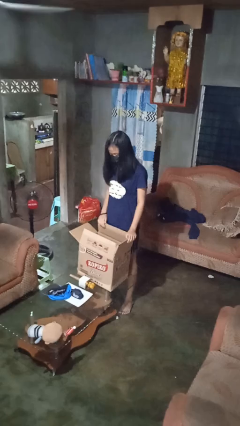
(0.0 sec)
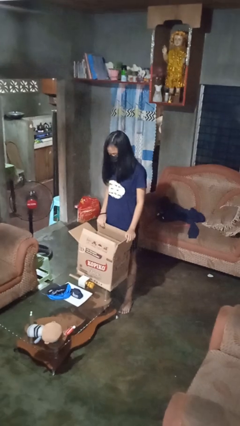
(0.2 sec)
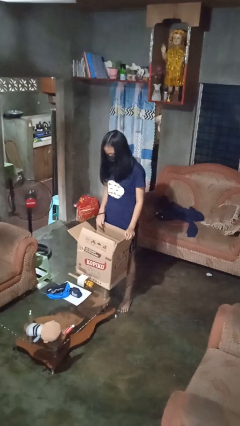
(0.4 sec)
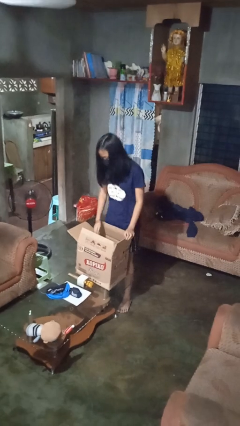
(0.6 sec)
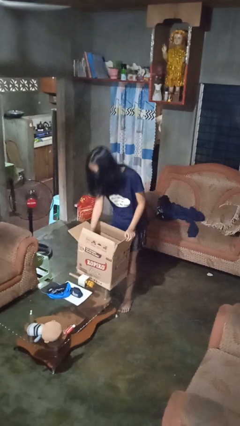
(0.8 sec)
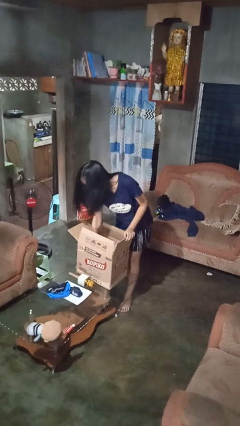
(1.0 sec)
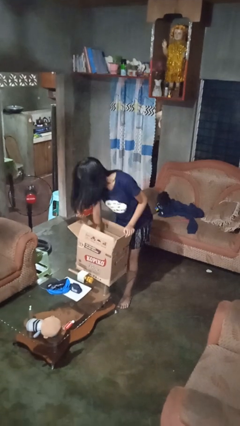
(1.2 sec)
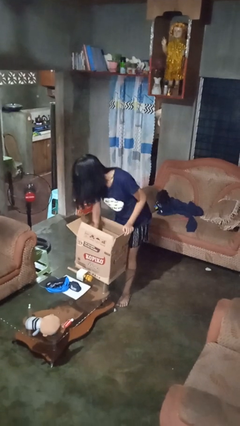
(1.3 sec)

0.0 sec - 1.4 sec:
person searches in box

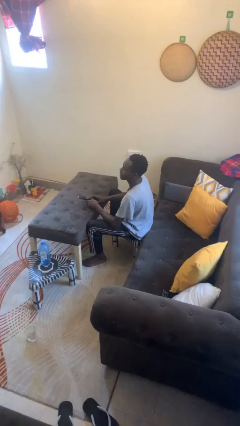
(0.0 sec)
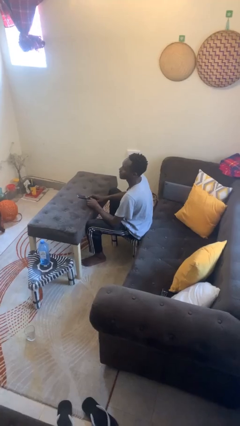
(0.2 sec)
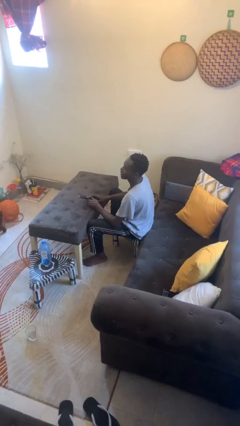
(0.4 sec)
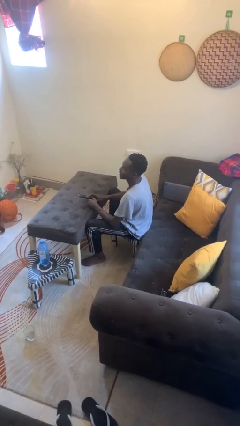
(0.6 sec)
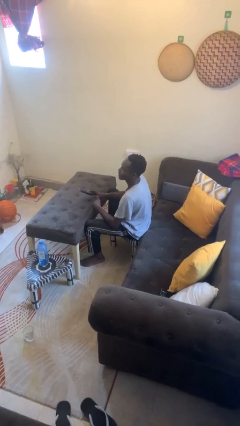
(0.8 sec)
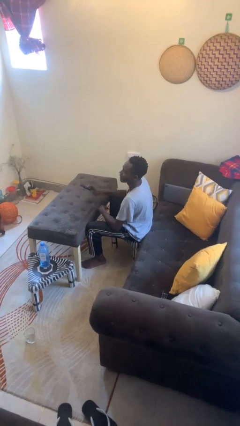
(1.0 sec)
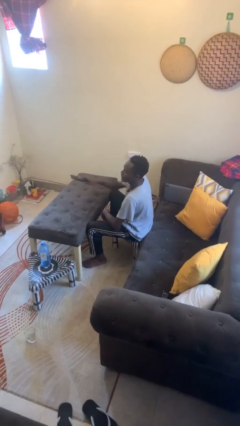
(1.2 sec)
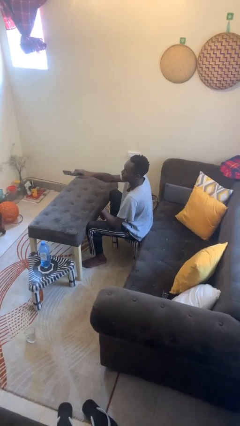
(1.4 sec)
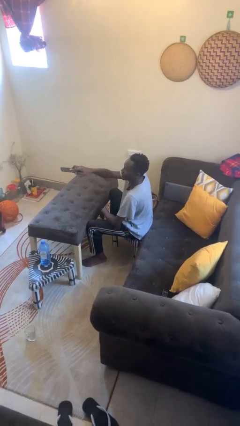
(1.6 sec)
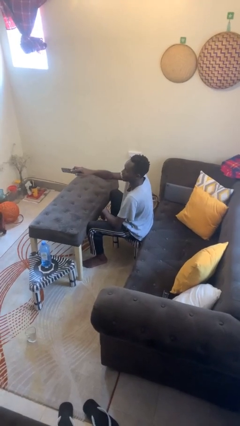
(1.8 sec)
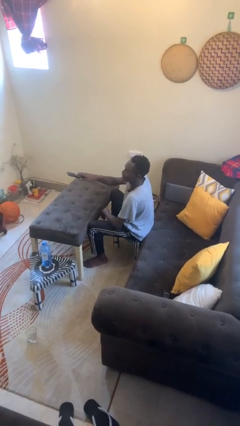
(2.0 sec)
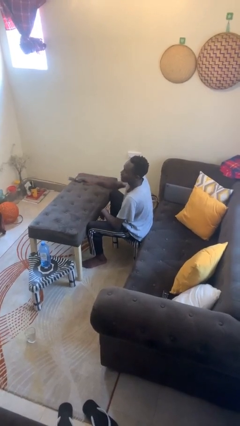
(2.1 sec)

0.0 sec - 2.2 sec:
person uses television remote

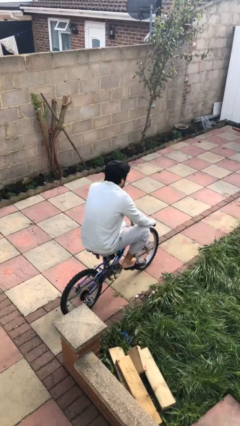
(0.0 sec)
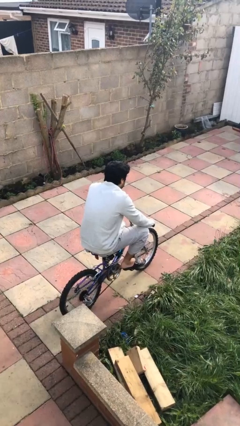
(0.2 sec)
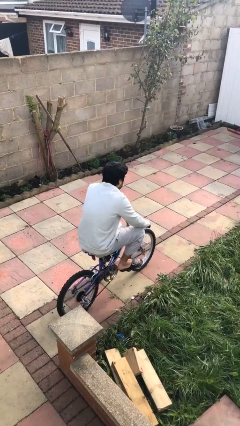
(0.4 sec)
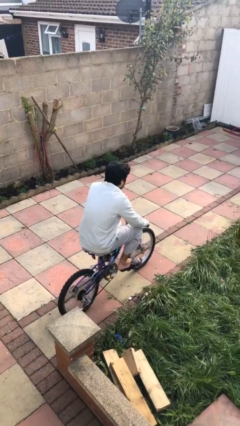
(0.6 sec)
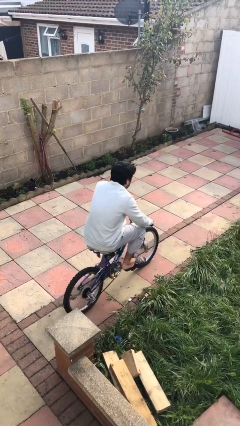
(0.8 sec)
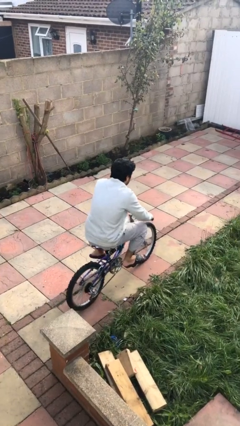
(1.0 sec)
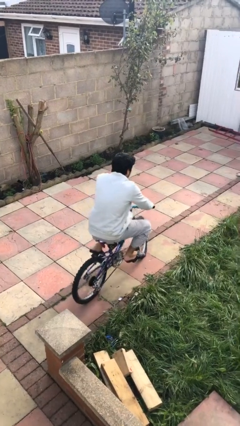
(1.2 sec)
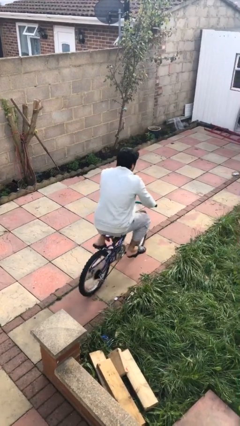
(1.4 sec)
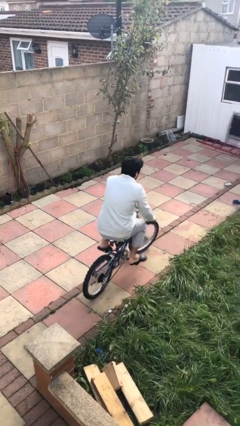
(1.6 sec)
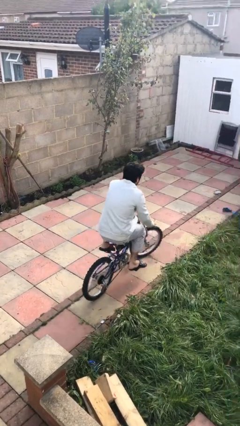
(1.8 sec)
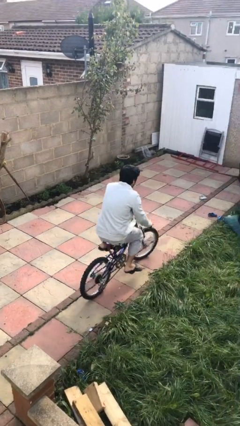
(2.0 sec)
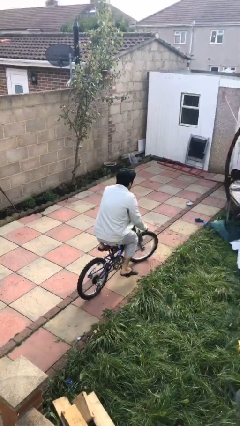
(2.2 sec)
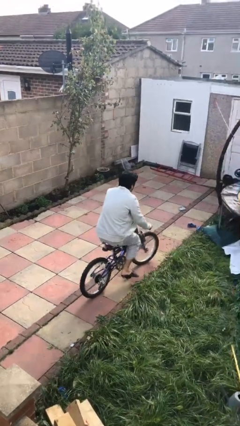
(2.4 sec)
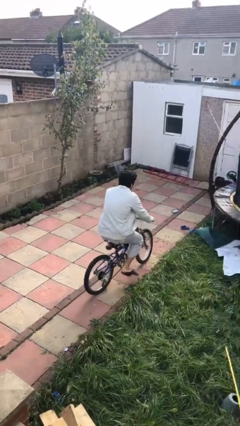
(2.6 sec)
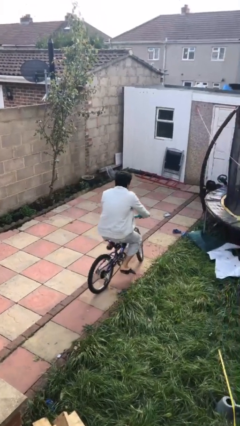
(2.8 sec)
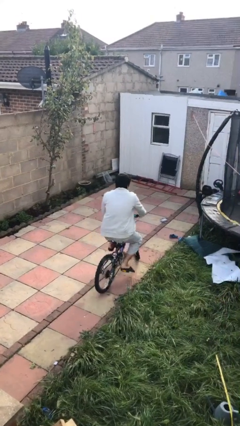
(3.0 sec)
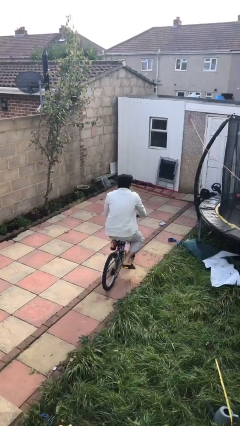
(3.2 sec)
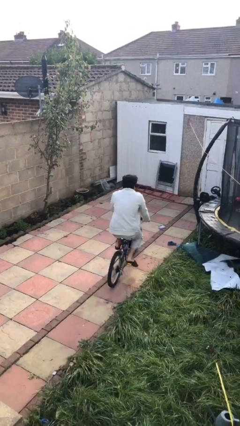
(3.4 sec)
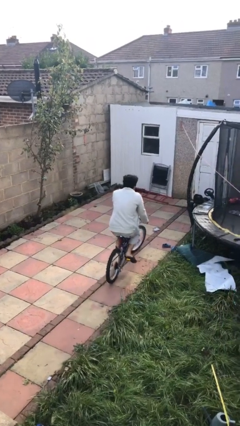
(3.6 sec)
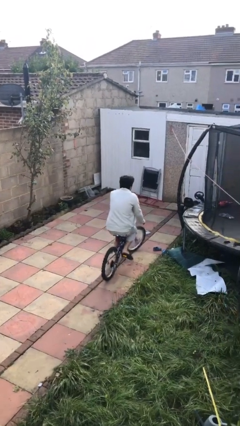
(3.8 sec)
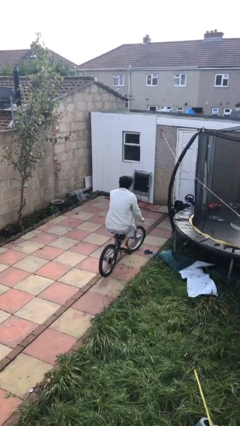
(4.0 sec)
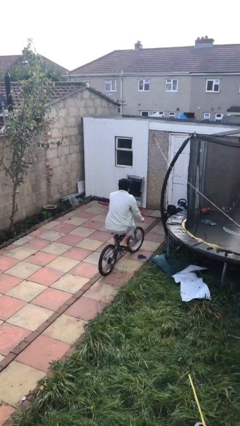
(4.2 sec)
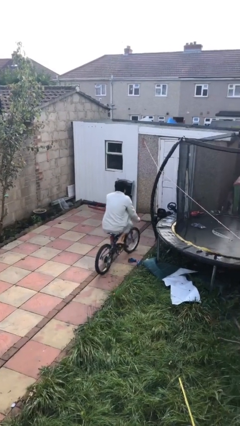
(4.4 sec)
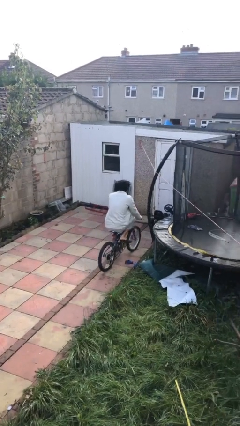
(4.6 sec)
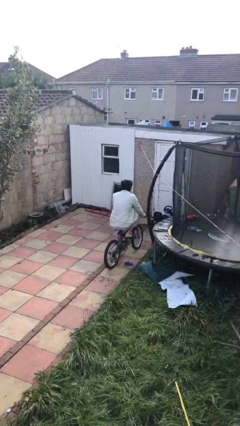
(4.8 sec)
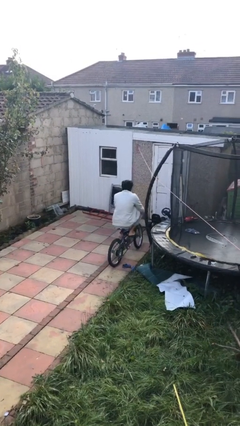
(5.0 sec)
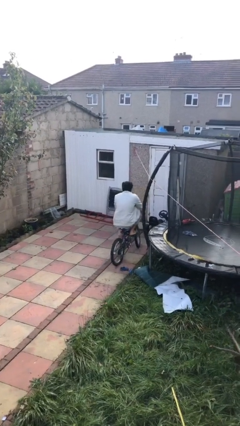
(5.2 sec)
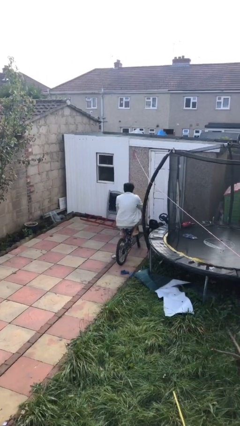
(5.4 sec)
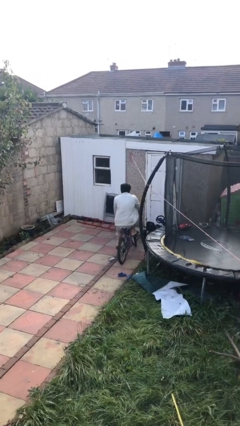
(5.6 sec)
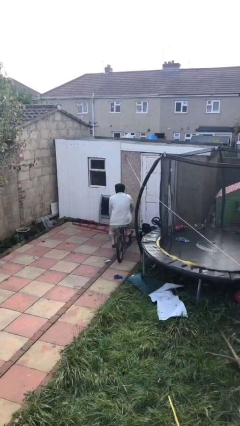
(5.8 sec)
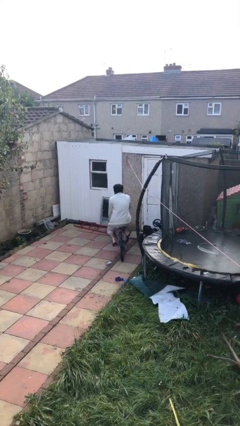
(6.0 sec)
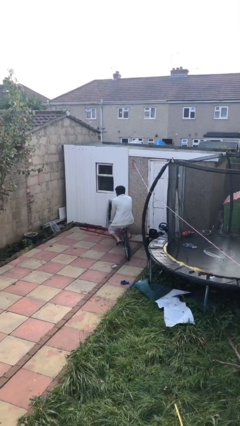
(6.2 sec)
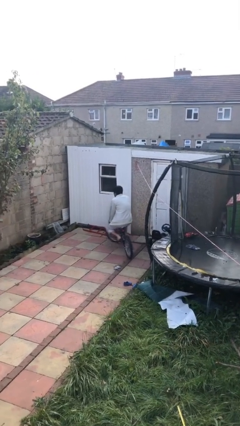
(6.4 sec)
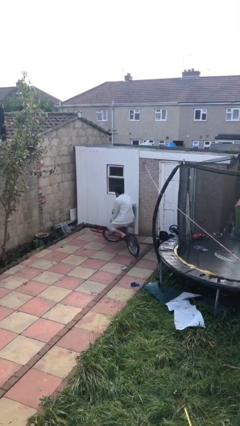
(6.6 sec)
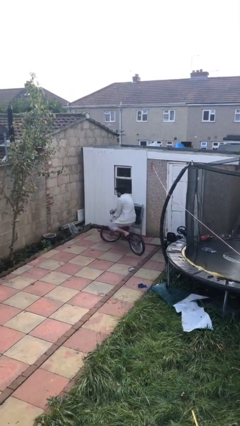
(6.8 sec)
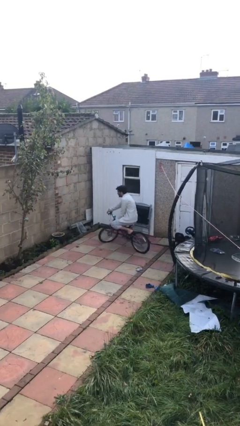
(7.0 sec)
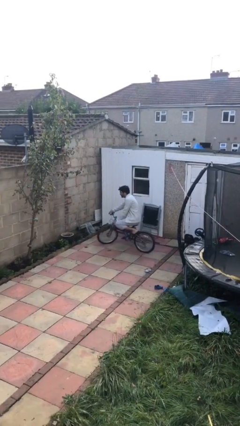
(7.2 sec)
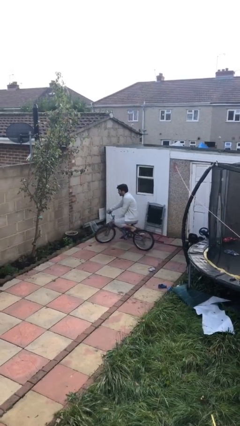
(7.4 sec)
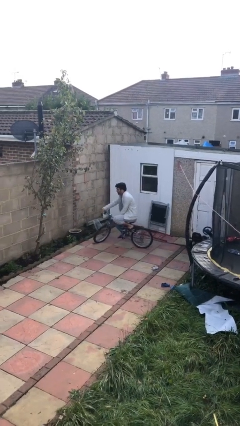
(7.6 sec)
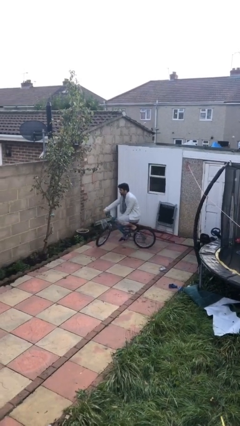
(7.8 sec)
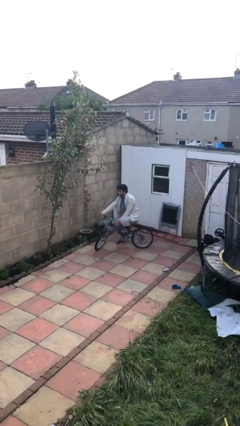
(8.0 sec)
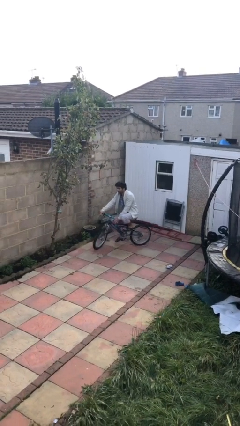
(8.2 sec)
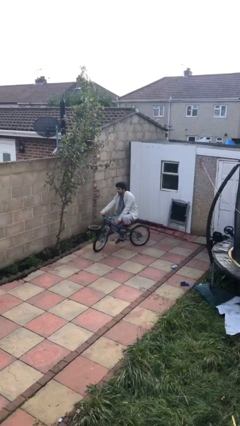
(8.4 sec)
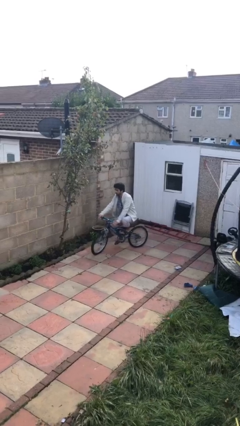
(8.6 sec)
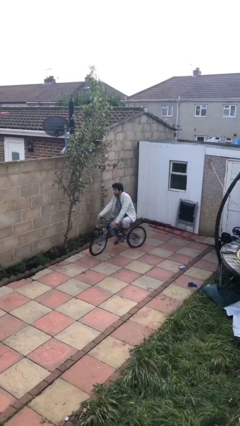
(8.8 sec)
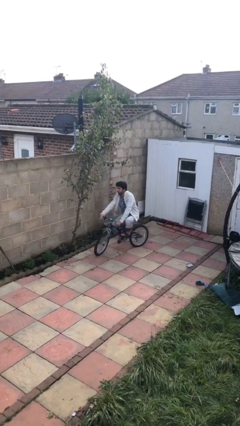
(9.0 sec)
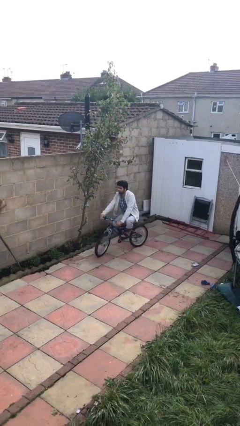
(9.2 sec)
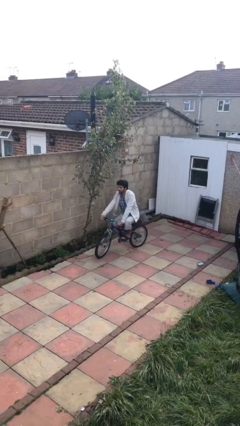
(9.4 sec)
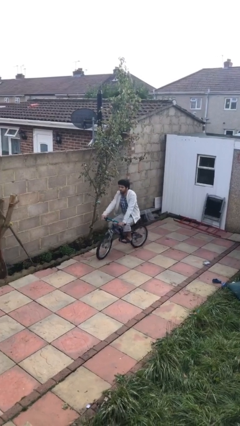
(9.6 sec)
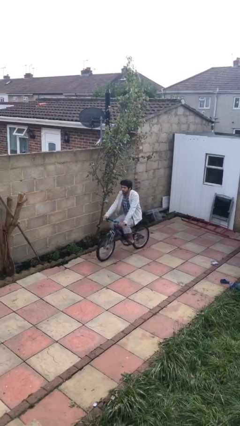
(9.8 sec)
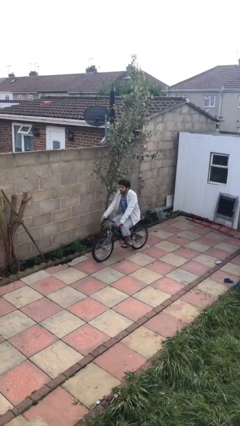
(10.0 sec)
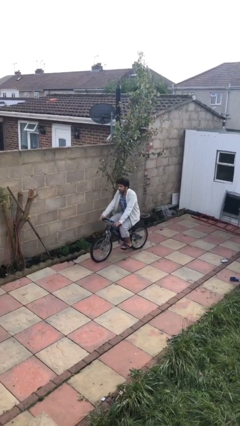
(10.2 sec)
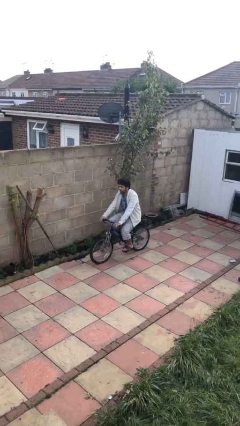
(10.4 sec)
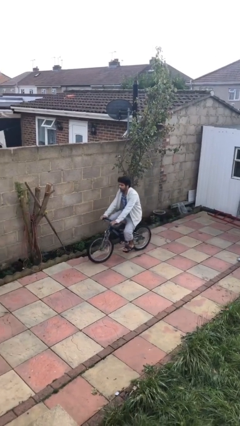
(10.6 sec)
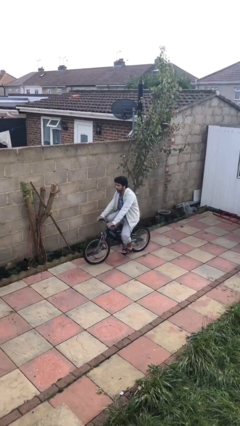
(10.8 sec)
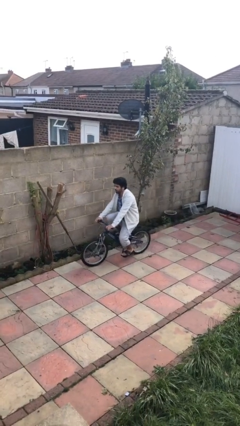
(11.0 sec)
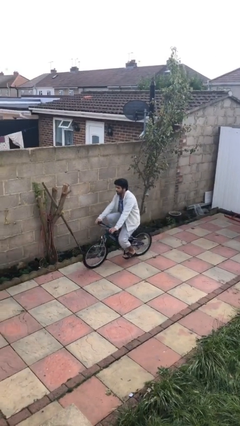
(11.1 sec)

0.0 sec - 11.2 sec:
person rides bicycle

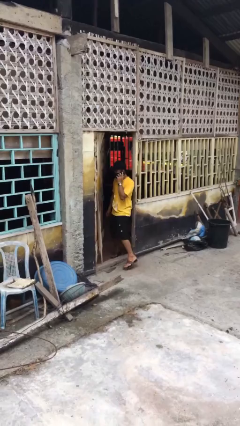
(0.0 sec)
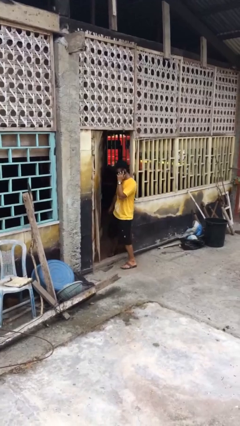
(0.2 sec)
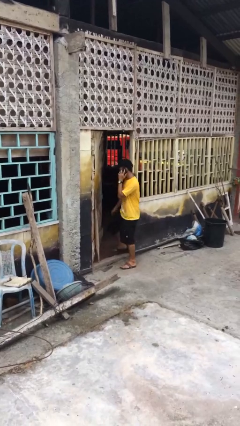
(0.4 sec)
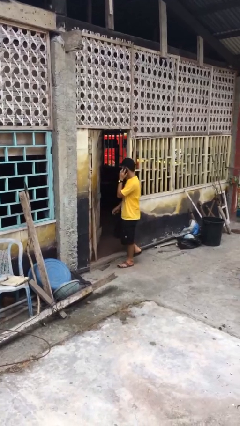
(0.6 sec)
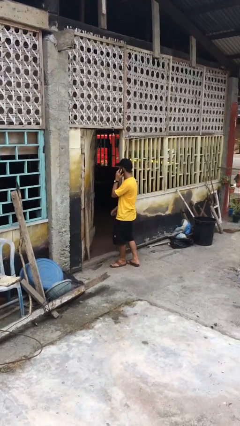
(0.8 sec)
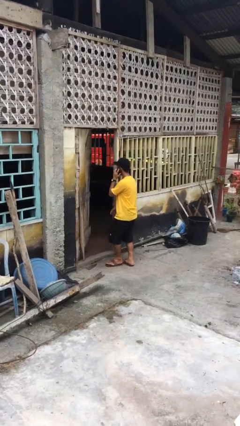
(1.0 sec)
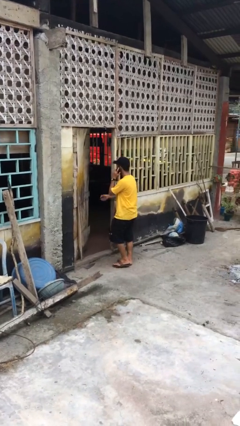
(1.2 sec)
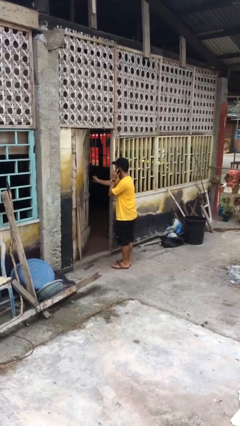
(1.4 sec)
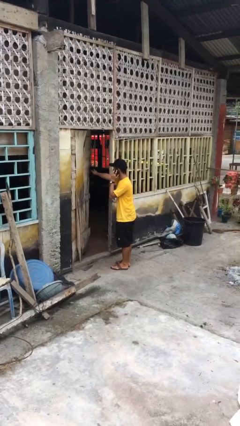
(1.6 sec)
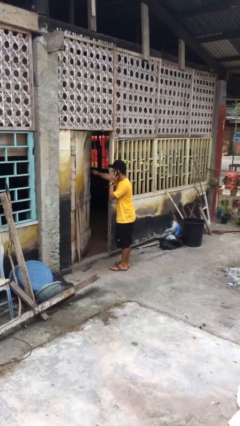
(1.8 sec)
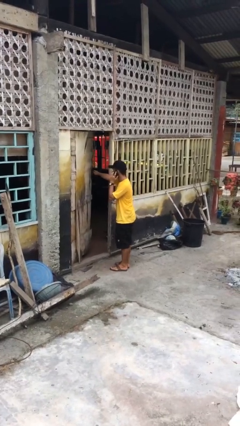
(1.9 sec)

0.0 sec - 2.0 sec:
person enters scene through structure

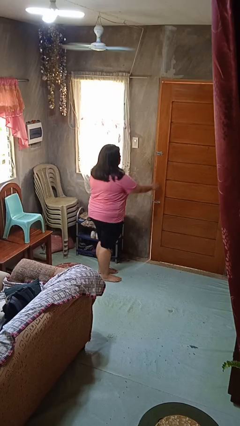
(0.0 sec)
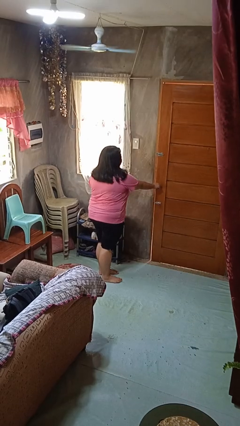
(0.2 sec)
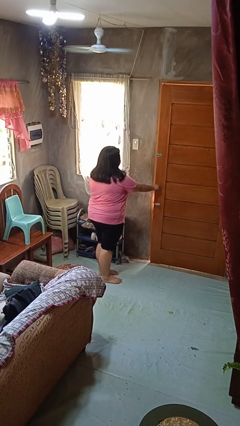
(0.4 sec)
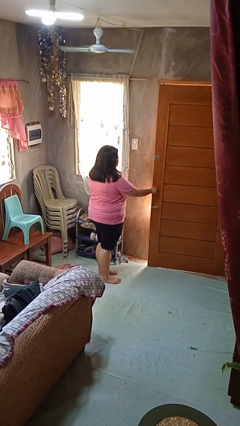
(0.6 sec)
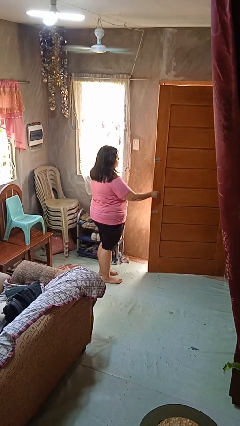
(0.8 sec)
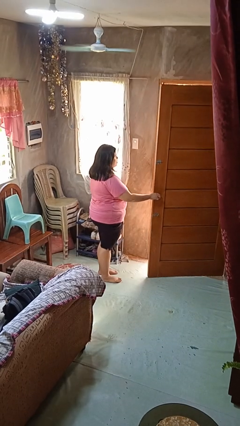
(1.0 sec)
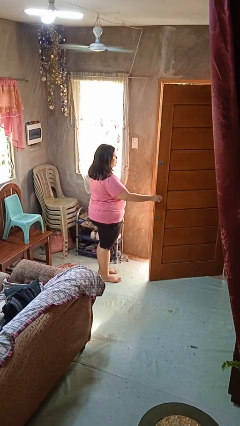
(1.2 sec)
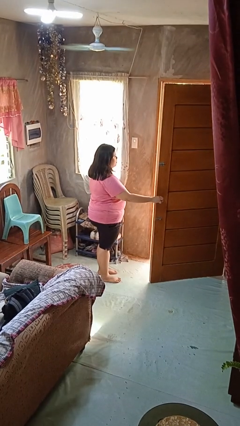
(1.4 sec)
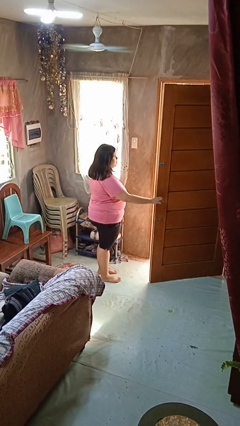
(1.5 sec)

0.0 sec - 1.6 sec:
person opens facility door
